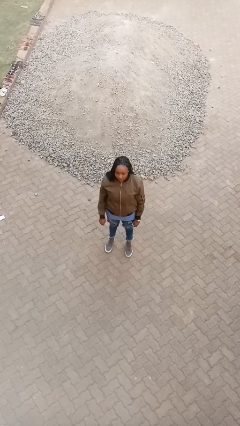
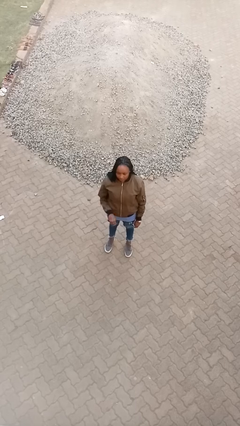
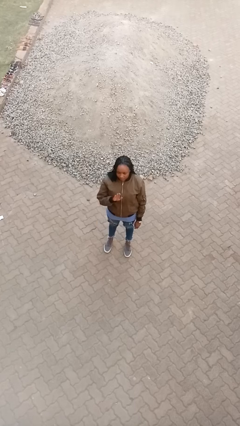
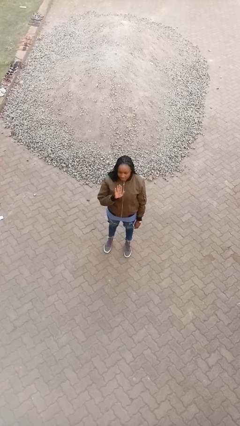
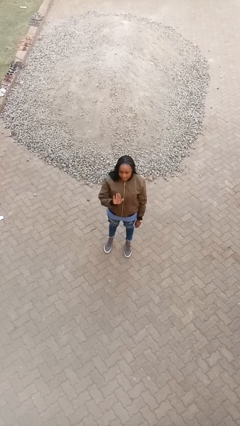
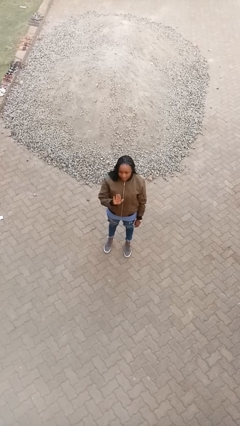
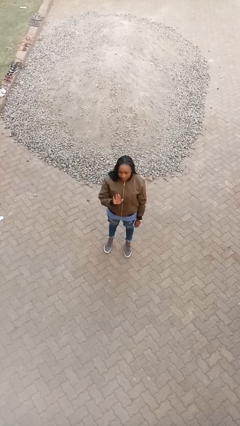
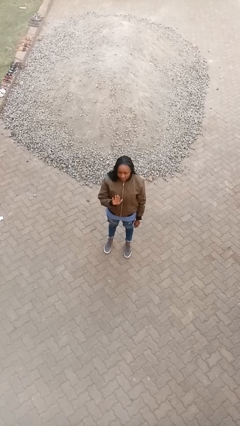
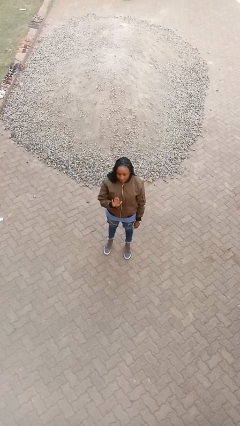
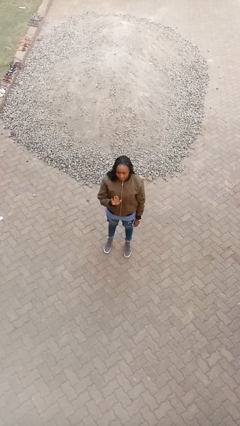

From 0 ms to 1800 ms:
person gestures stop

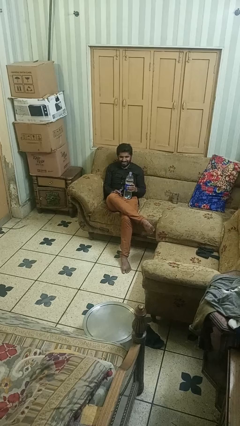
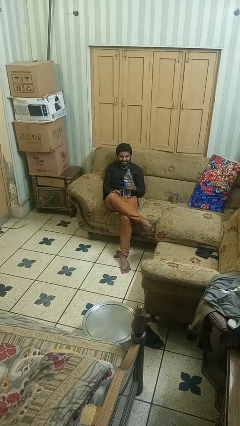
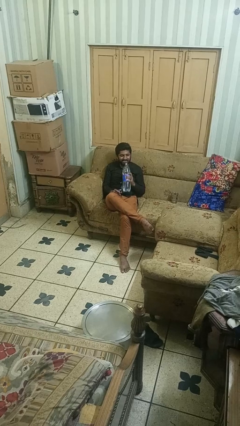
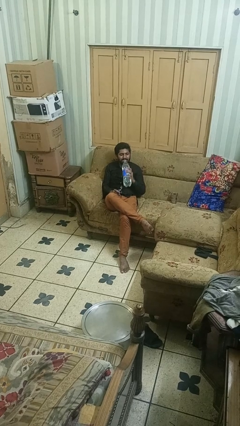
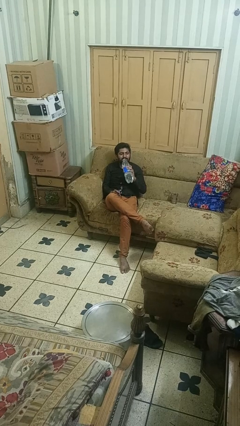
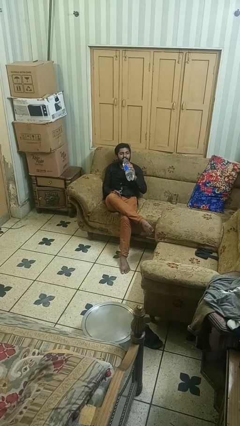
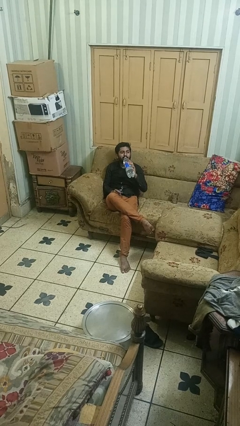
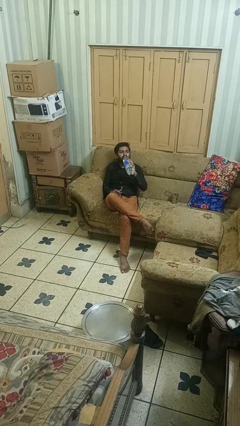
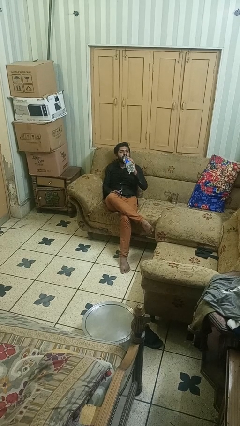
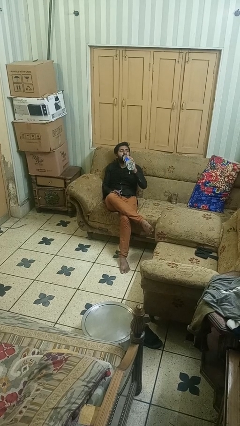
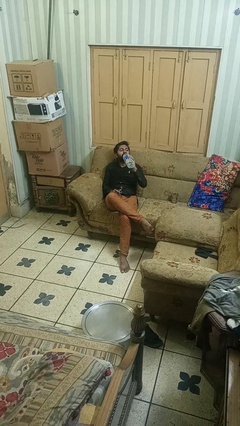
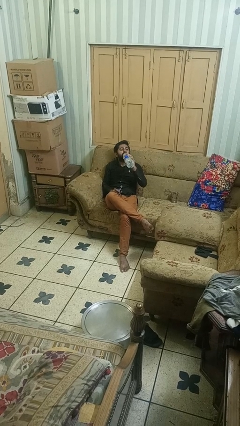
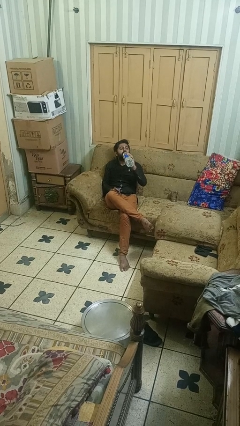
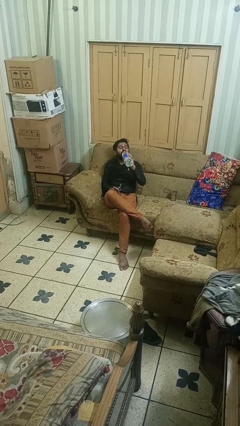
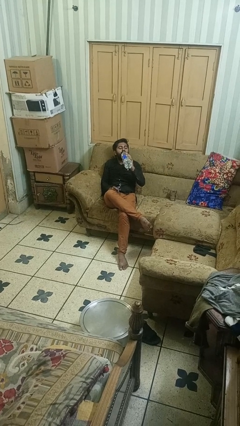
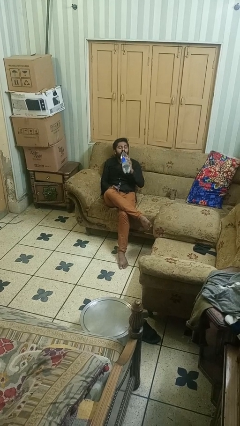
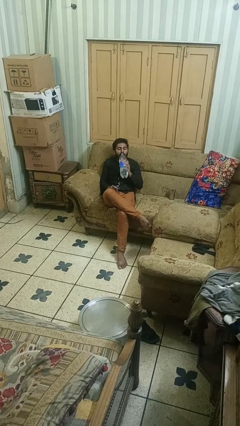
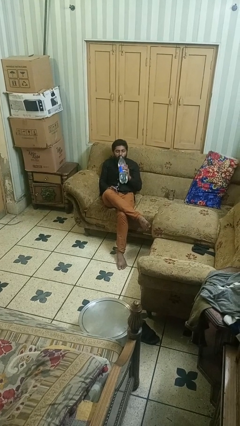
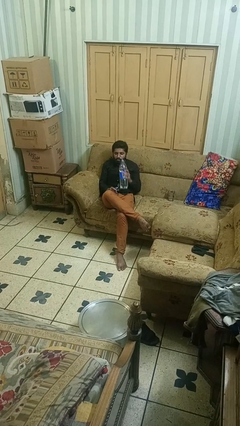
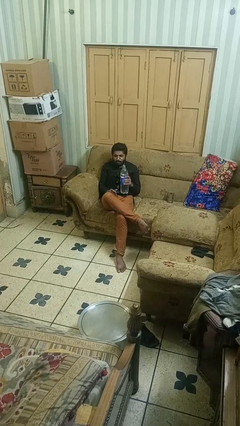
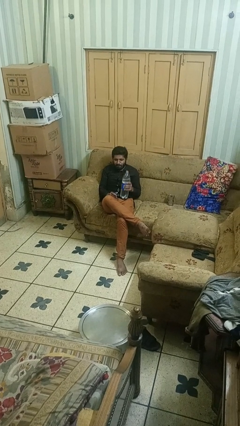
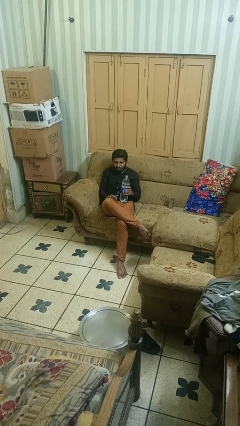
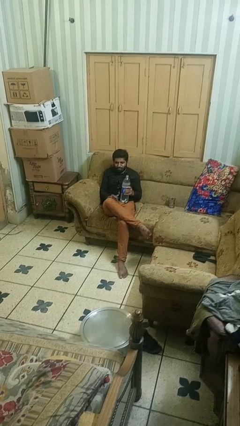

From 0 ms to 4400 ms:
person drinks from bottle

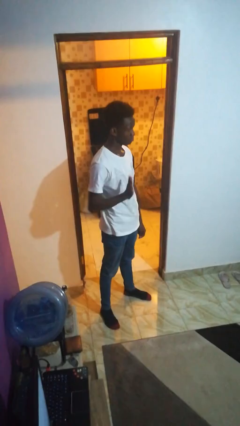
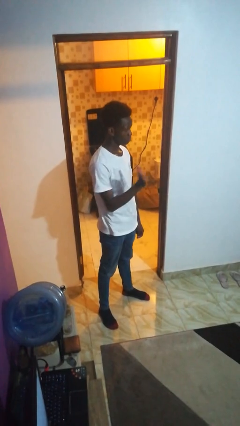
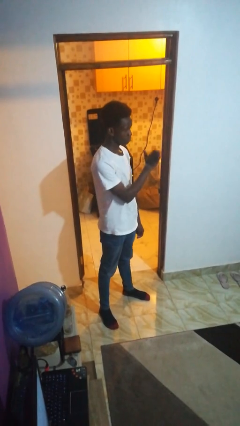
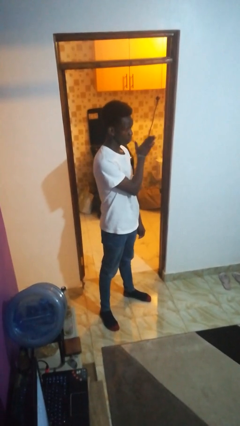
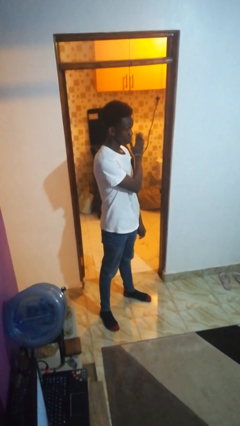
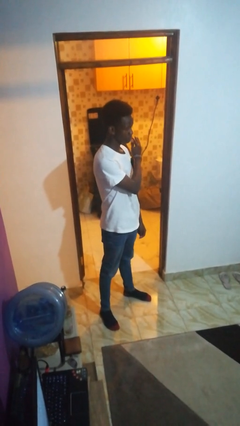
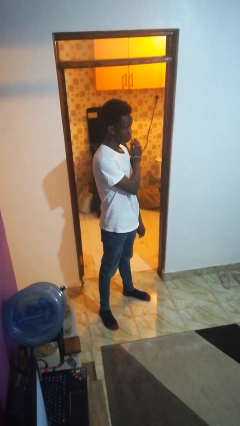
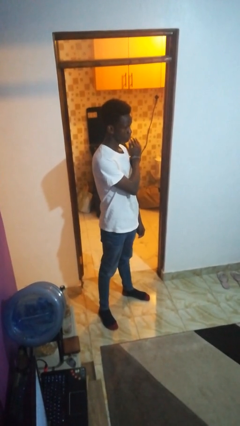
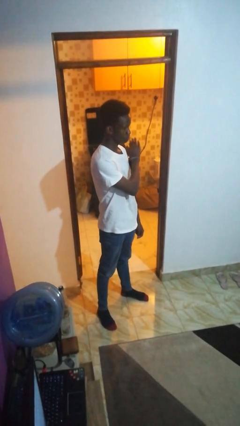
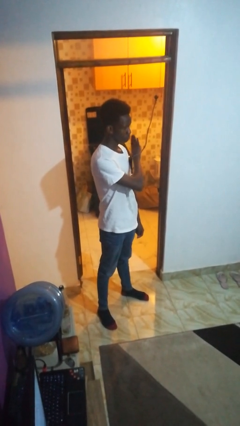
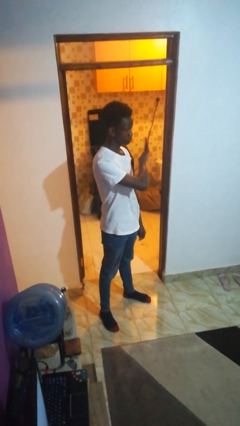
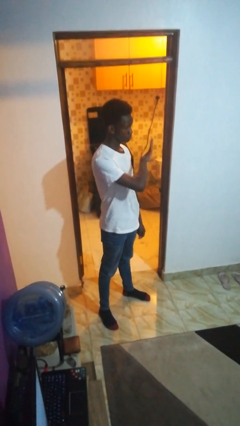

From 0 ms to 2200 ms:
person gestures swipe left

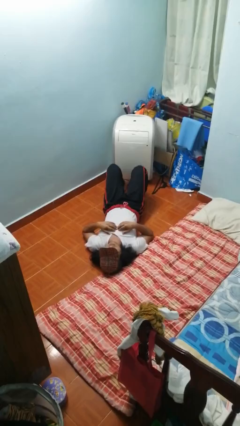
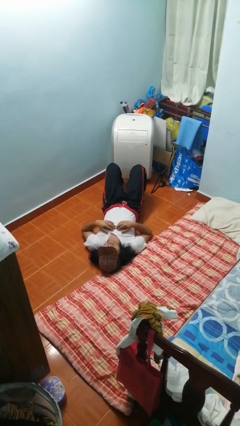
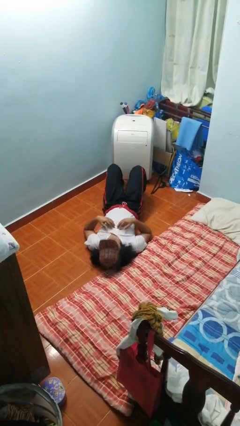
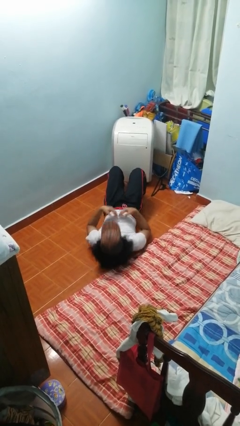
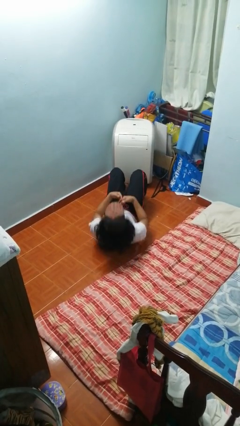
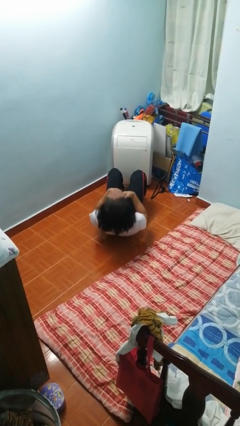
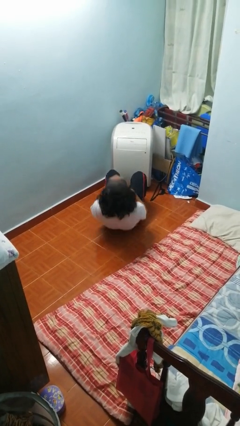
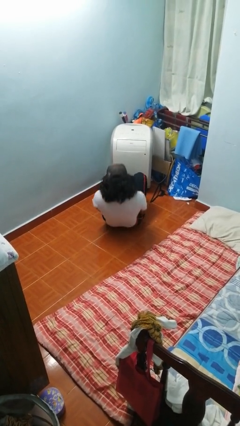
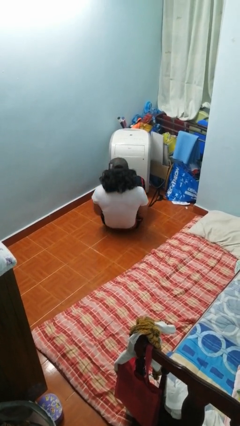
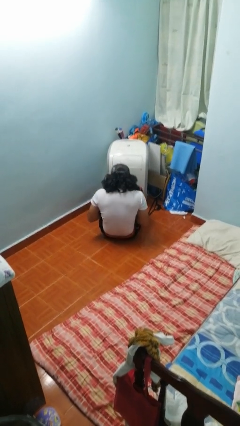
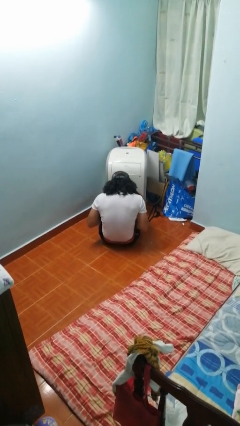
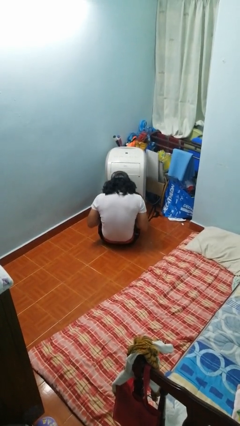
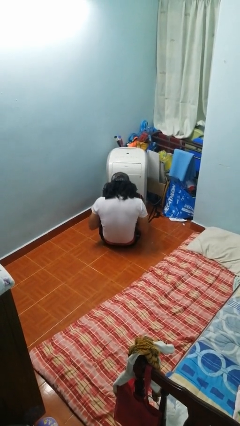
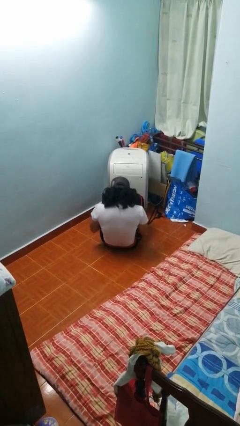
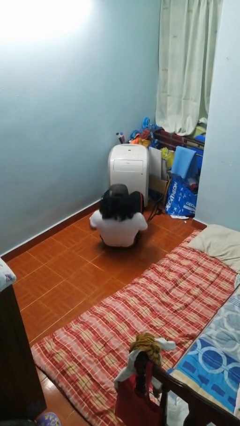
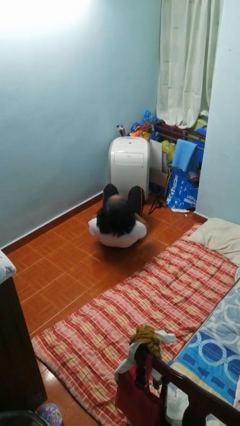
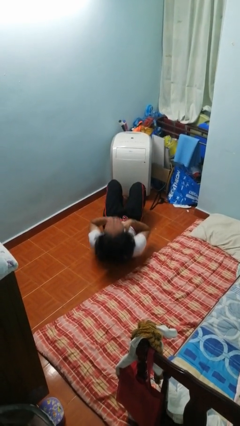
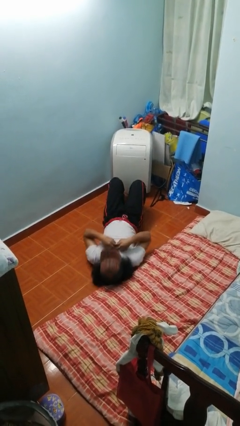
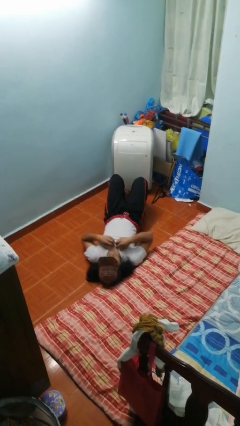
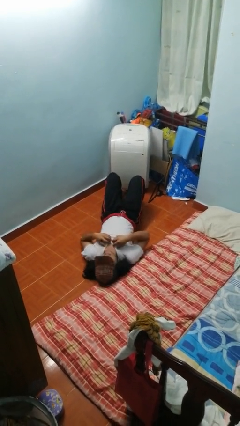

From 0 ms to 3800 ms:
person exercises with situp

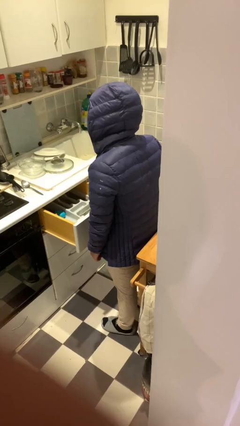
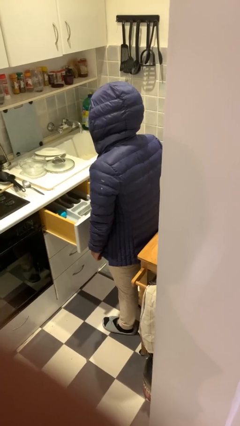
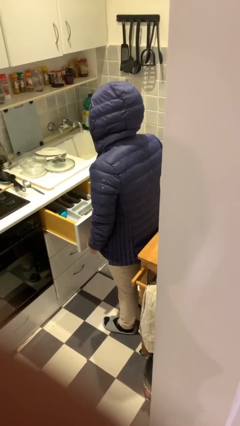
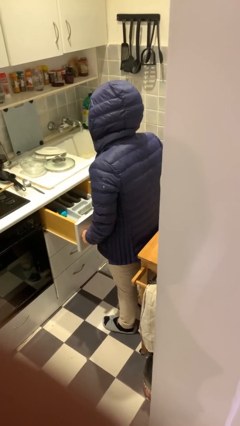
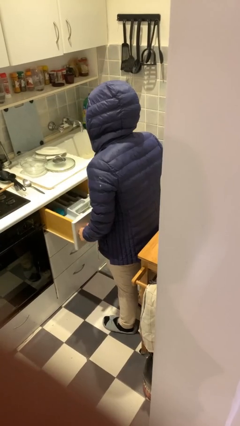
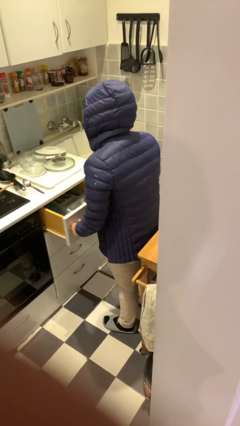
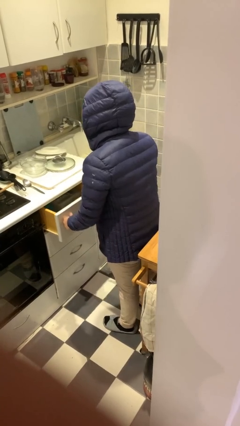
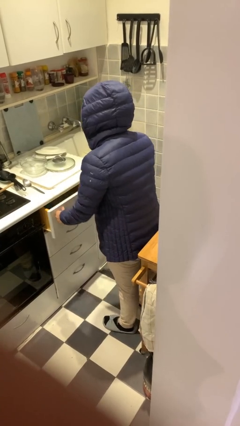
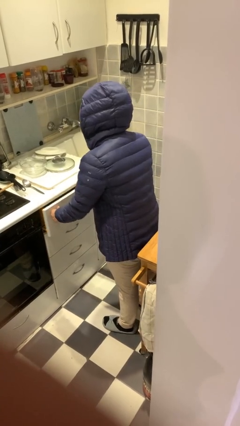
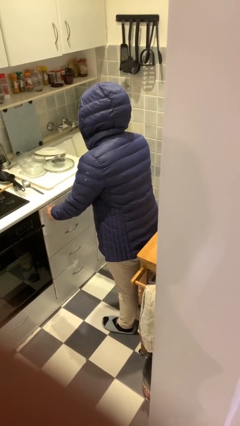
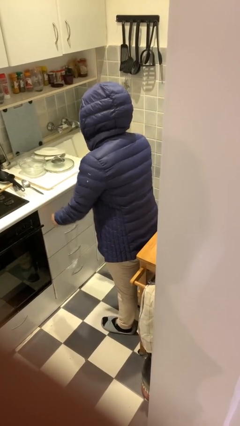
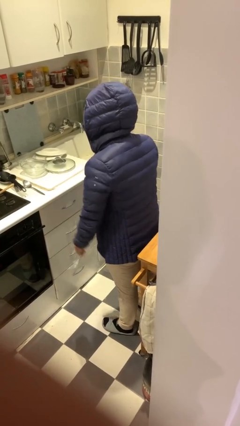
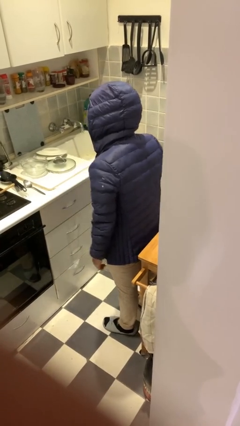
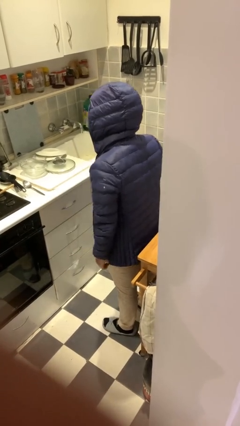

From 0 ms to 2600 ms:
person closes kitchen drawer

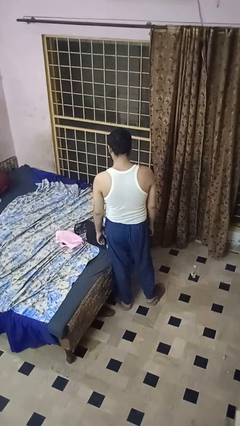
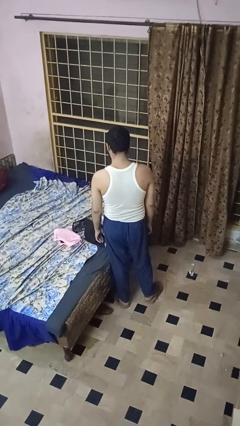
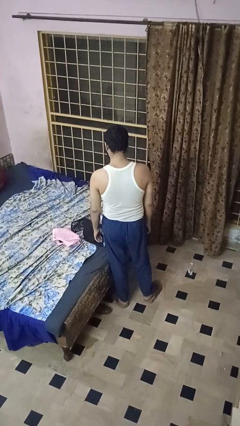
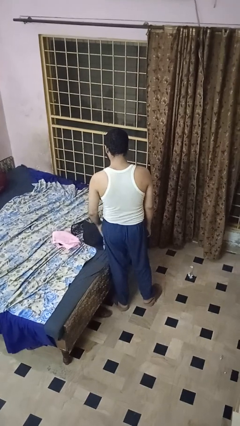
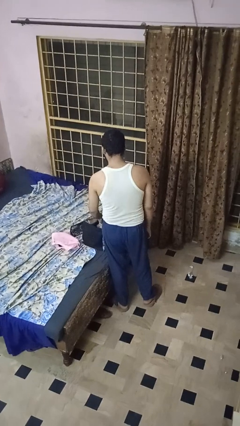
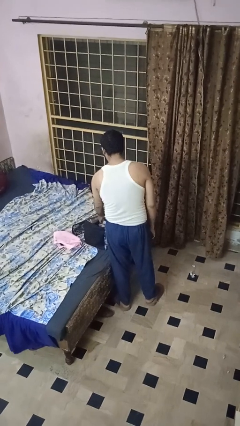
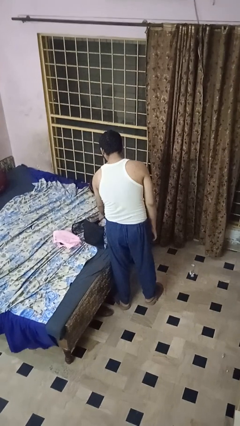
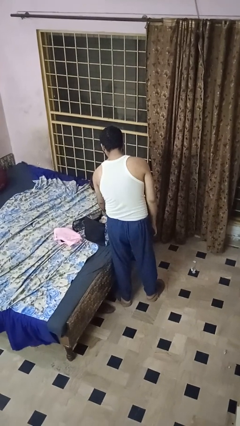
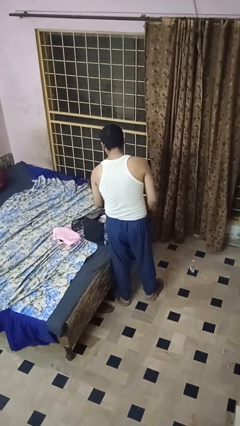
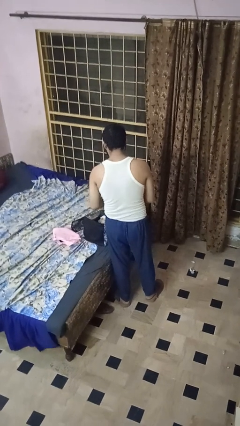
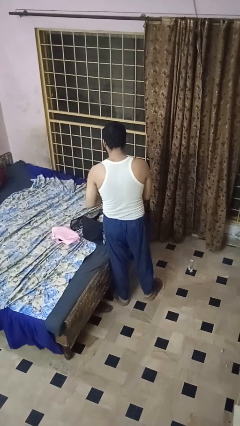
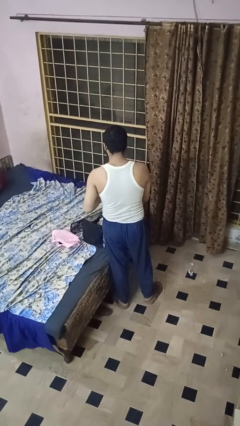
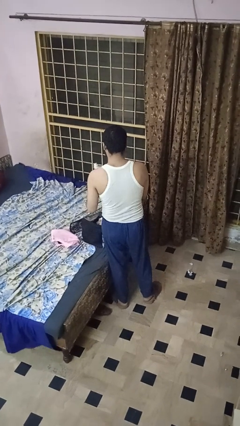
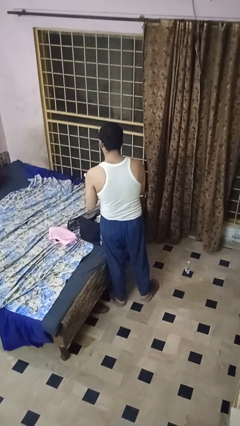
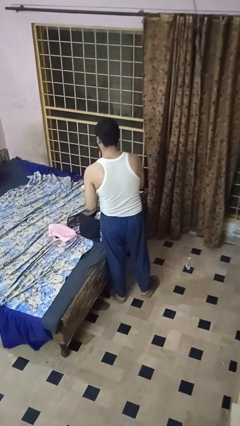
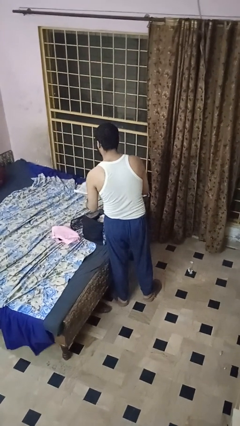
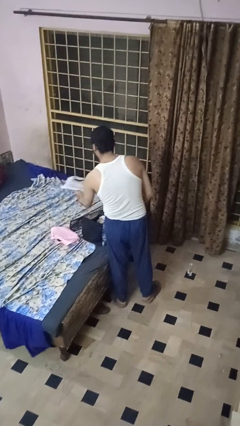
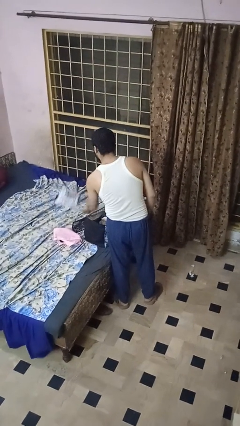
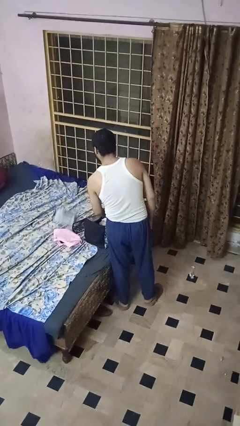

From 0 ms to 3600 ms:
person unloads clothes from suitcase
